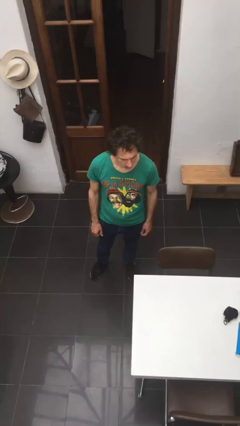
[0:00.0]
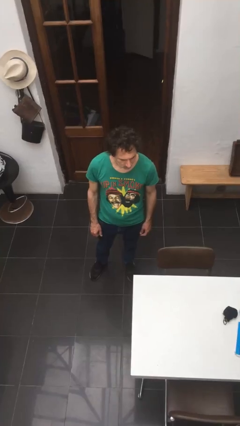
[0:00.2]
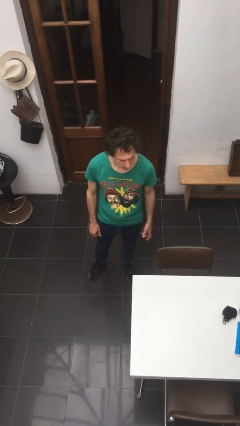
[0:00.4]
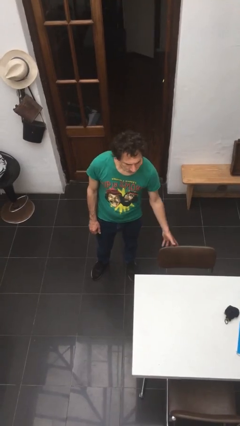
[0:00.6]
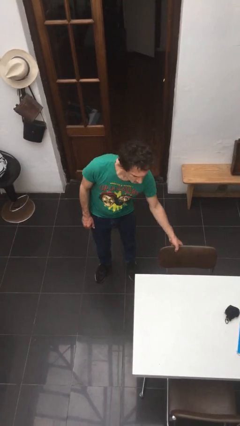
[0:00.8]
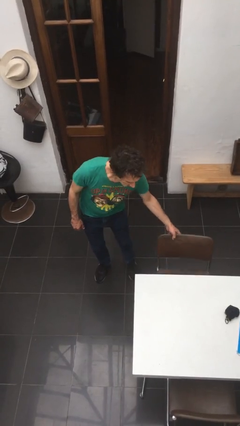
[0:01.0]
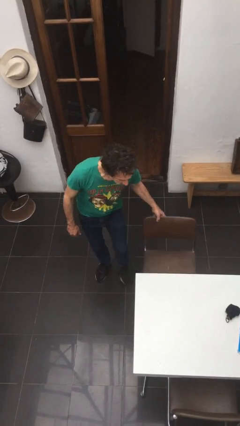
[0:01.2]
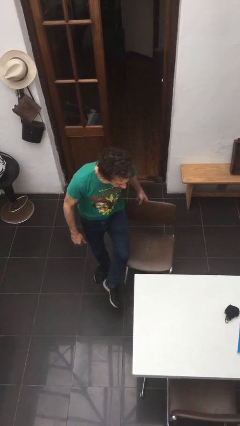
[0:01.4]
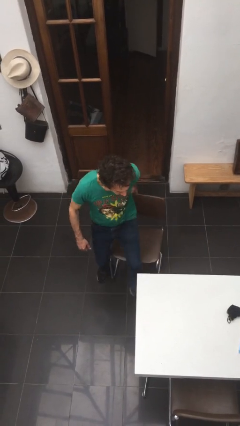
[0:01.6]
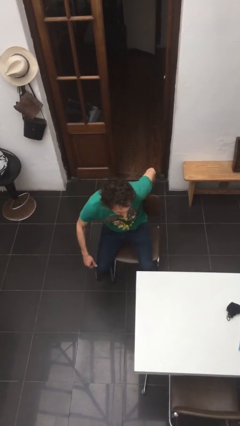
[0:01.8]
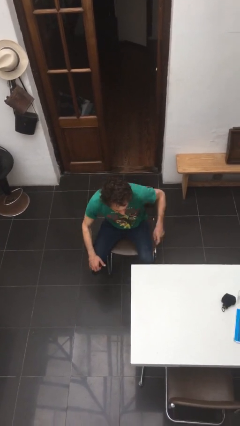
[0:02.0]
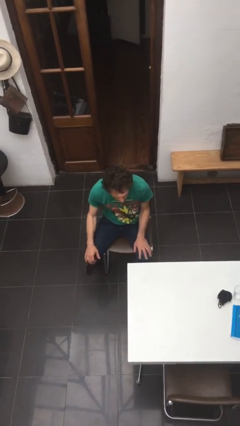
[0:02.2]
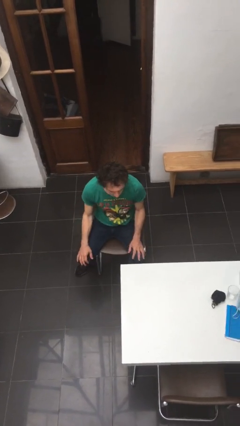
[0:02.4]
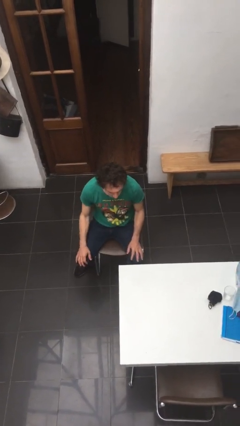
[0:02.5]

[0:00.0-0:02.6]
person sits down

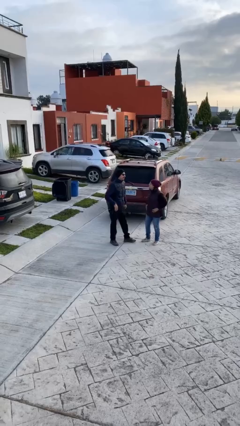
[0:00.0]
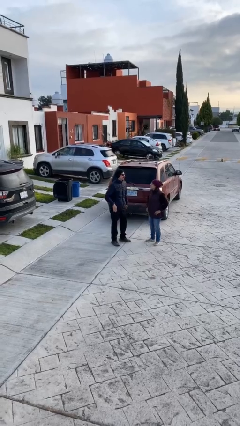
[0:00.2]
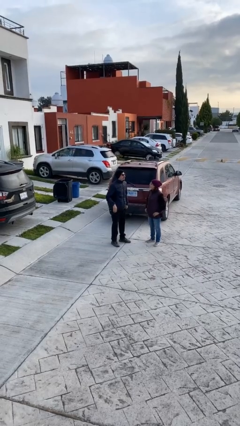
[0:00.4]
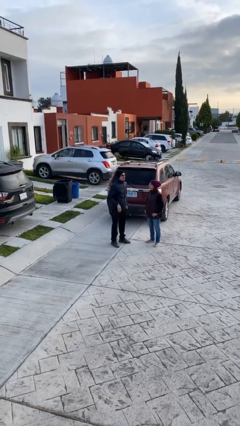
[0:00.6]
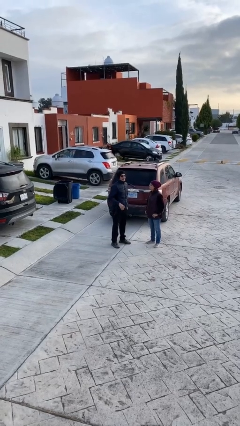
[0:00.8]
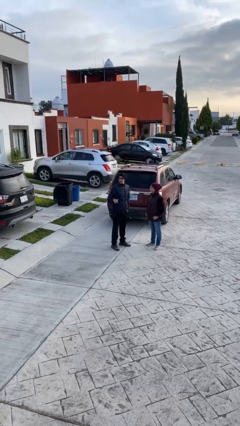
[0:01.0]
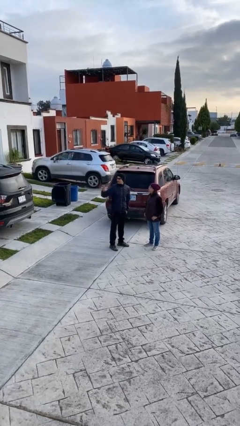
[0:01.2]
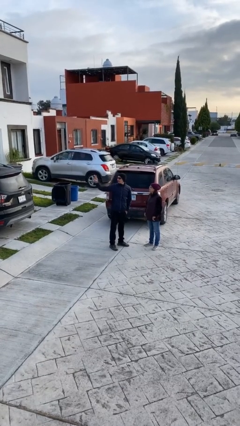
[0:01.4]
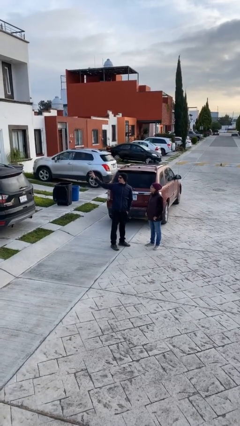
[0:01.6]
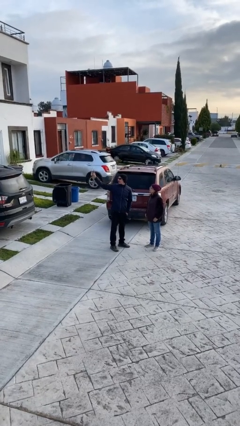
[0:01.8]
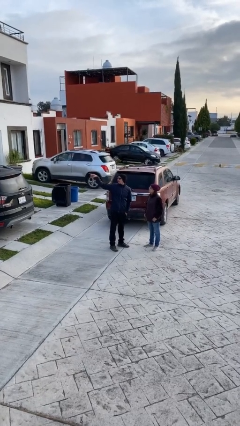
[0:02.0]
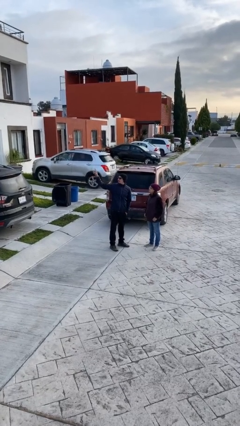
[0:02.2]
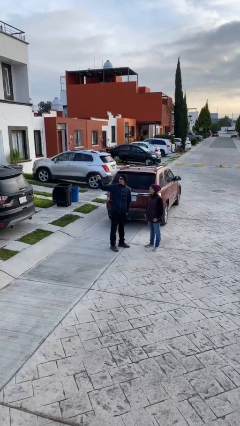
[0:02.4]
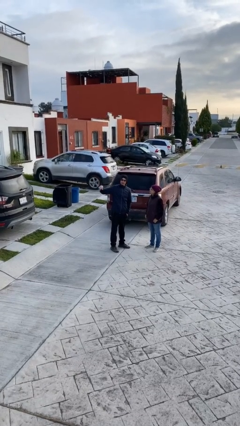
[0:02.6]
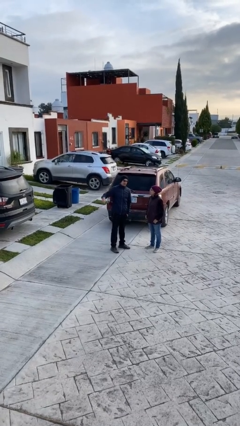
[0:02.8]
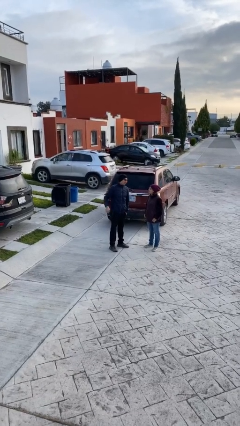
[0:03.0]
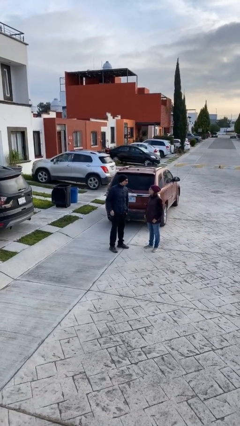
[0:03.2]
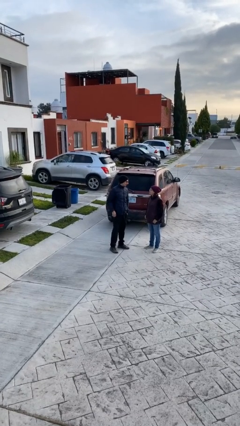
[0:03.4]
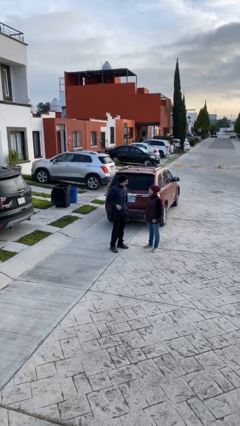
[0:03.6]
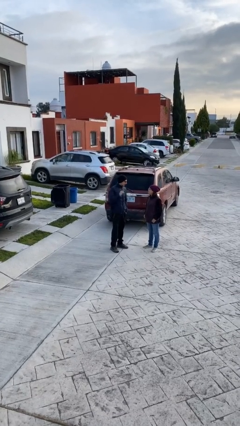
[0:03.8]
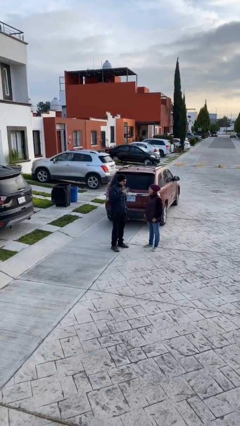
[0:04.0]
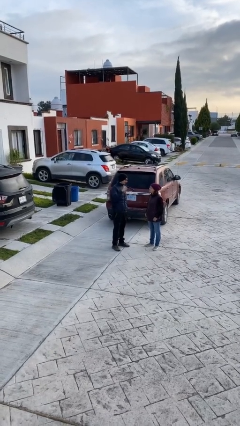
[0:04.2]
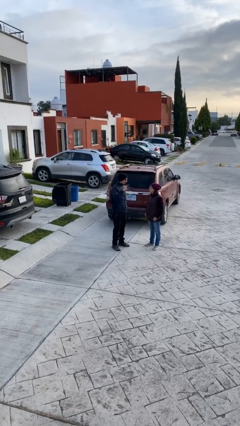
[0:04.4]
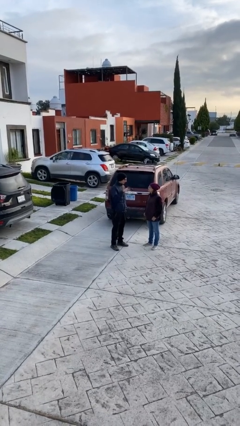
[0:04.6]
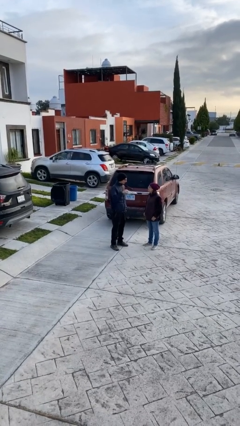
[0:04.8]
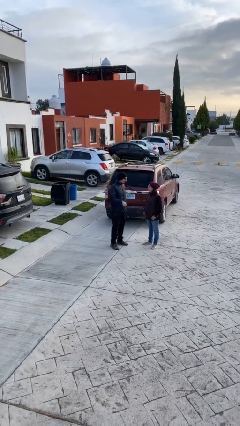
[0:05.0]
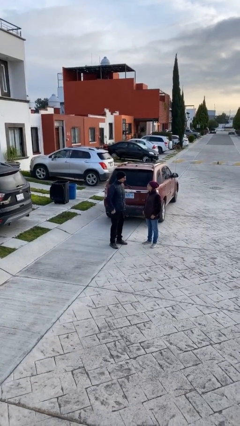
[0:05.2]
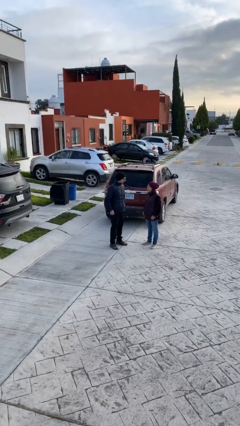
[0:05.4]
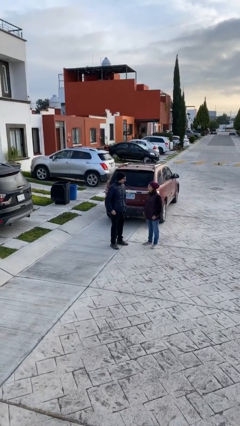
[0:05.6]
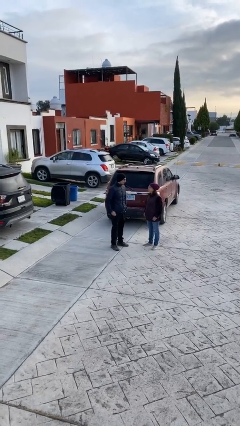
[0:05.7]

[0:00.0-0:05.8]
person talks to person

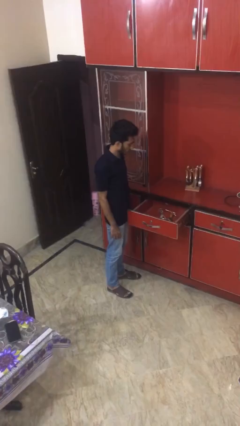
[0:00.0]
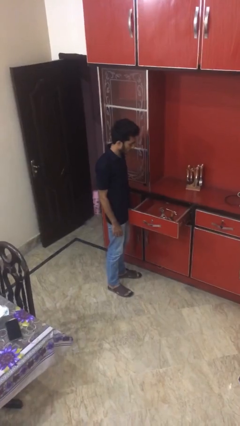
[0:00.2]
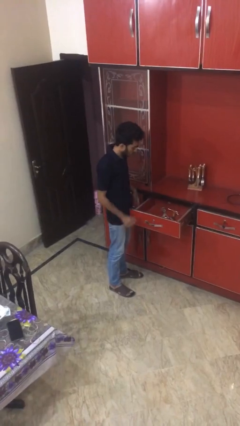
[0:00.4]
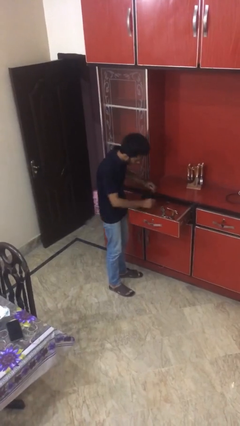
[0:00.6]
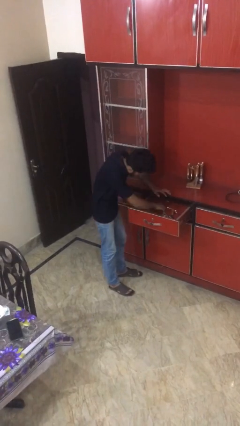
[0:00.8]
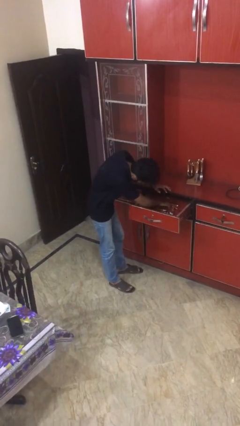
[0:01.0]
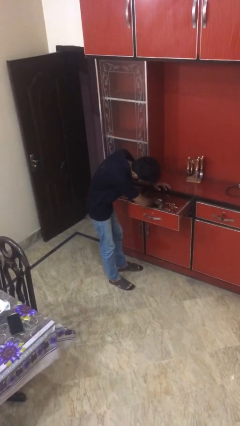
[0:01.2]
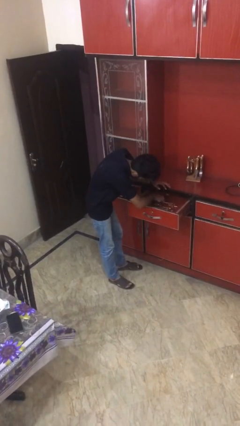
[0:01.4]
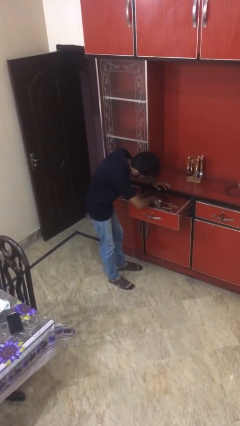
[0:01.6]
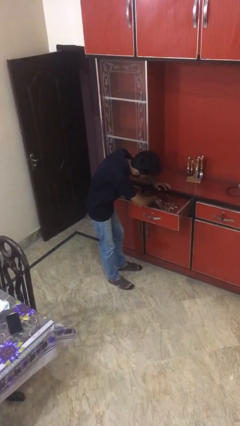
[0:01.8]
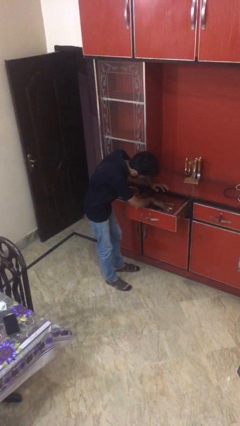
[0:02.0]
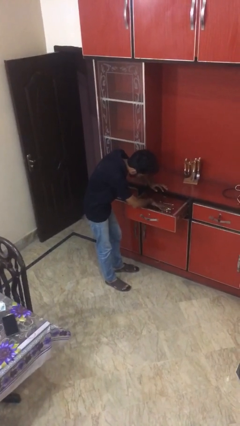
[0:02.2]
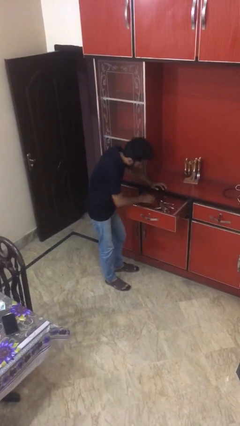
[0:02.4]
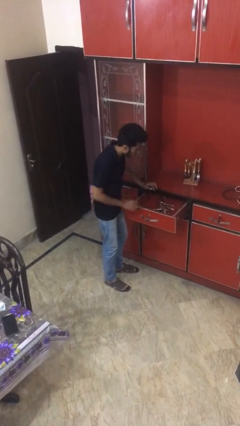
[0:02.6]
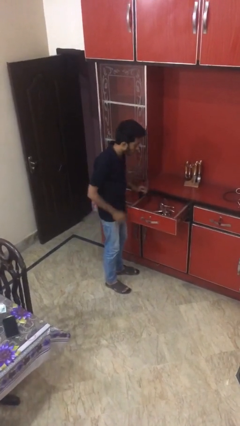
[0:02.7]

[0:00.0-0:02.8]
person searches in kitchen drawer

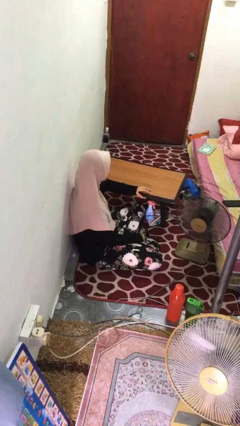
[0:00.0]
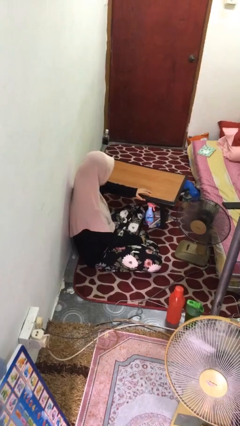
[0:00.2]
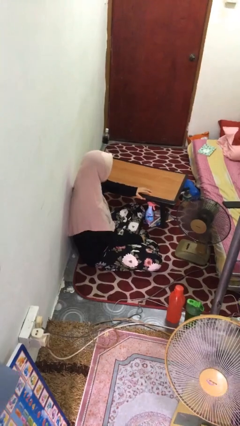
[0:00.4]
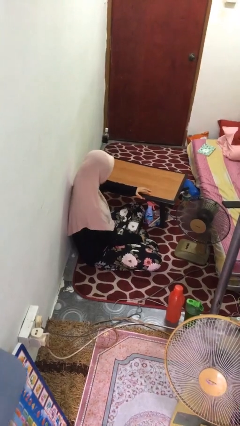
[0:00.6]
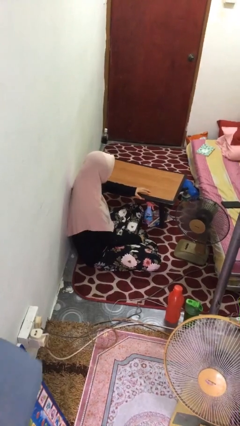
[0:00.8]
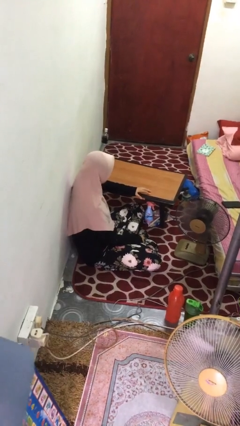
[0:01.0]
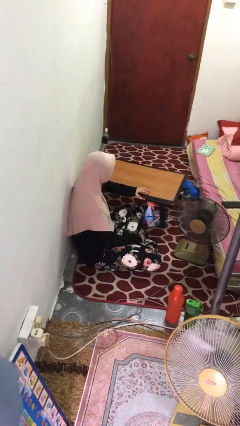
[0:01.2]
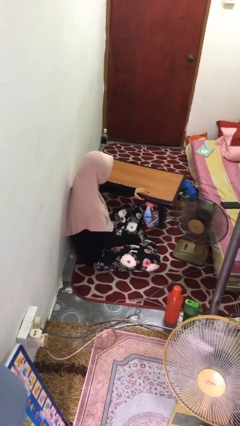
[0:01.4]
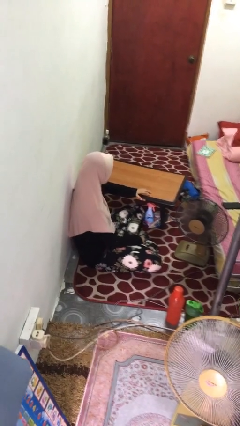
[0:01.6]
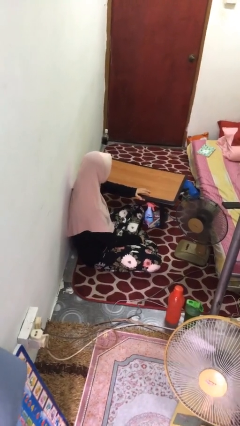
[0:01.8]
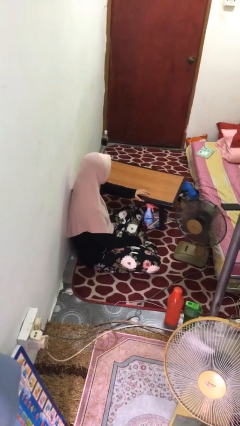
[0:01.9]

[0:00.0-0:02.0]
person nods head

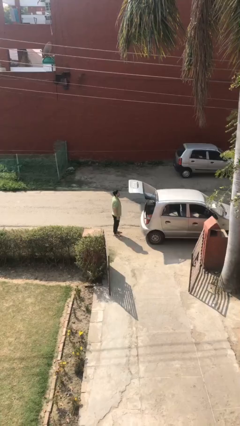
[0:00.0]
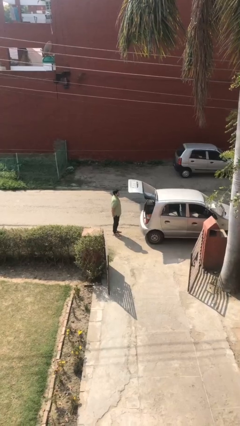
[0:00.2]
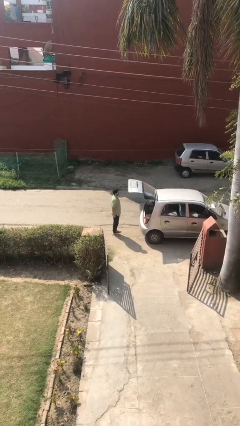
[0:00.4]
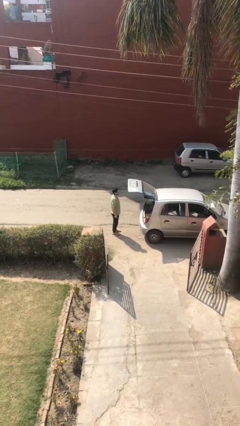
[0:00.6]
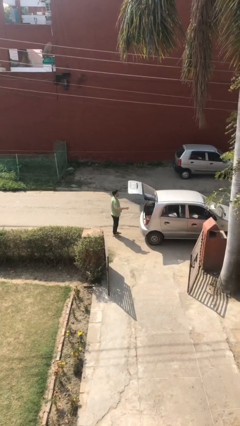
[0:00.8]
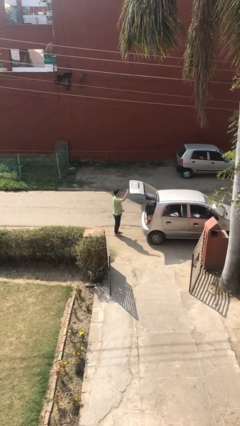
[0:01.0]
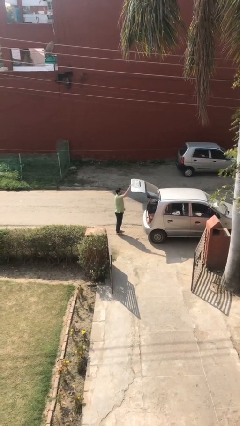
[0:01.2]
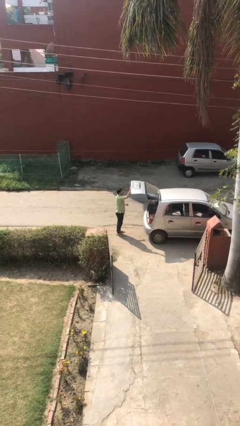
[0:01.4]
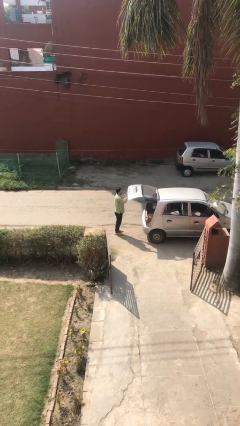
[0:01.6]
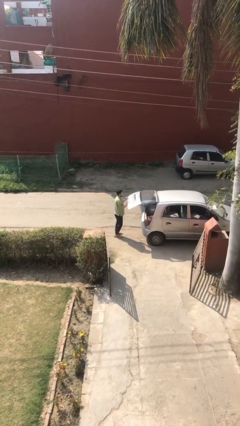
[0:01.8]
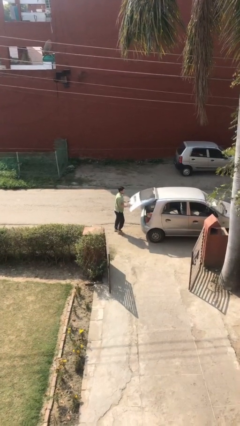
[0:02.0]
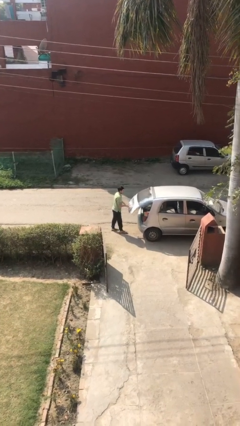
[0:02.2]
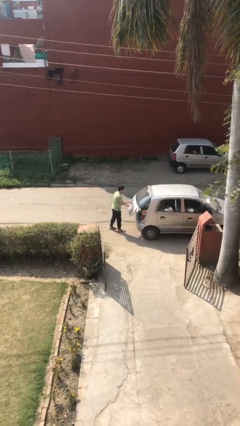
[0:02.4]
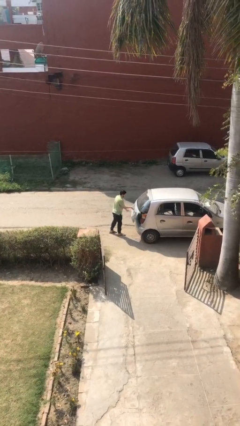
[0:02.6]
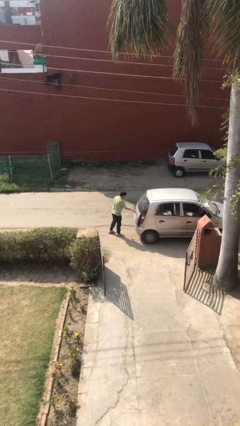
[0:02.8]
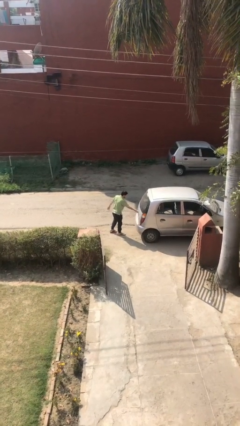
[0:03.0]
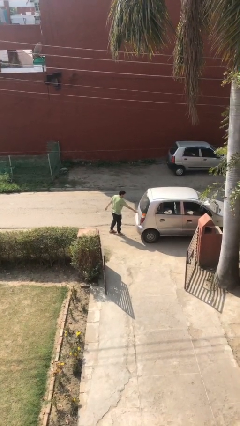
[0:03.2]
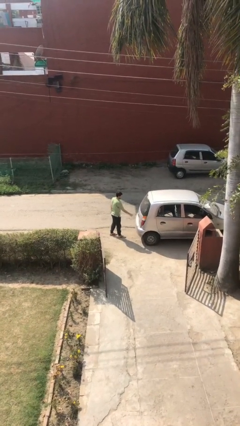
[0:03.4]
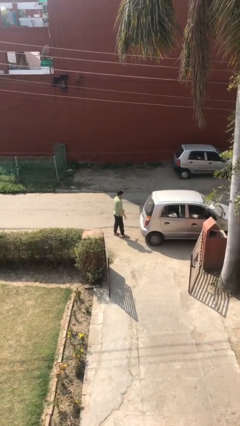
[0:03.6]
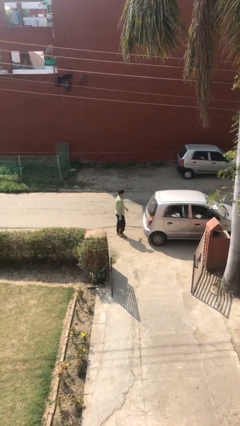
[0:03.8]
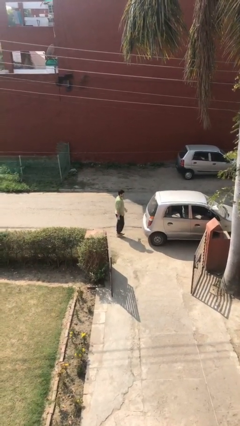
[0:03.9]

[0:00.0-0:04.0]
person closes car trunk

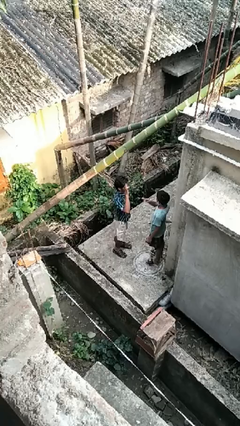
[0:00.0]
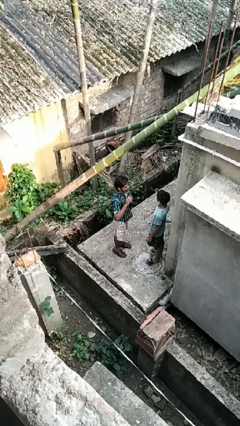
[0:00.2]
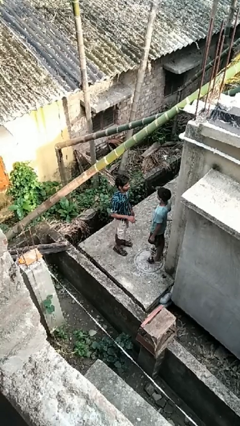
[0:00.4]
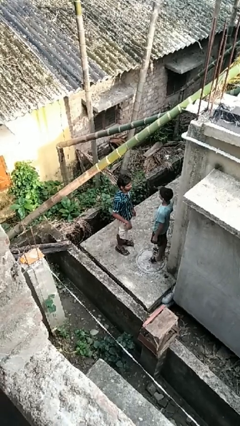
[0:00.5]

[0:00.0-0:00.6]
person highfives hand
